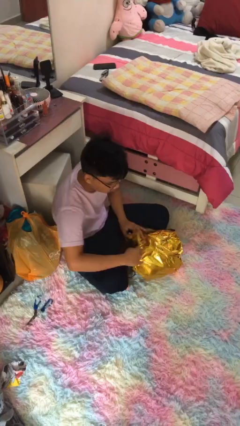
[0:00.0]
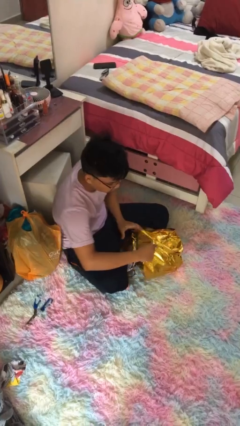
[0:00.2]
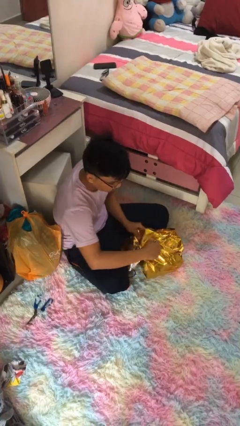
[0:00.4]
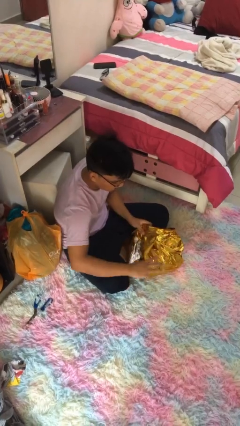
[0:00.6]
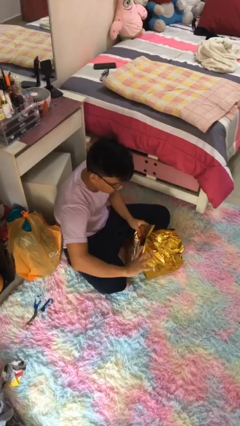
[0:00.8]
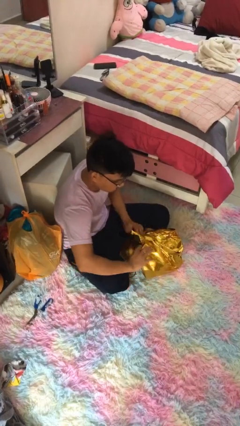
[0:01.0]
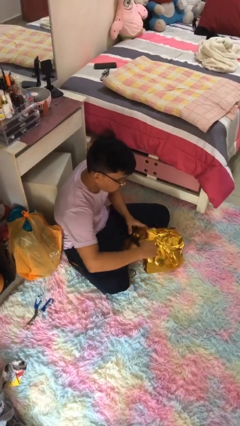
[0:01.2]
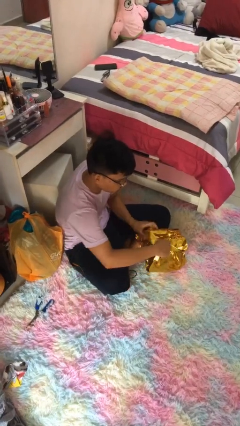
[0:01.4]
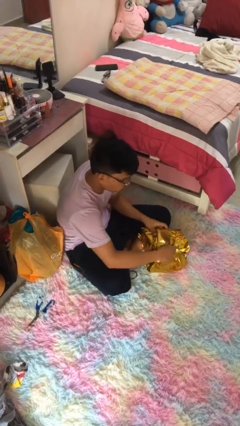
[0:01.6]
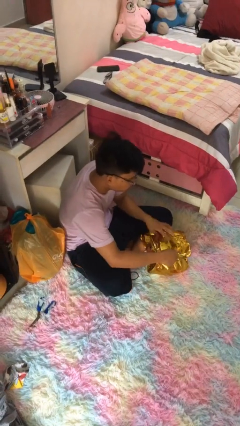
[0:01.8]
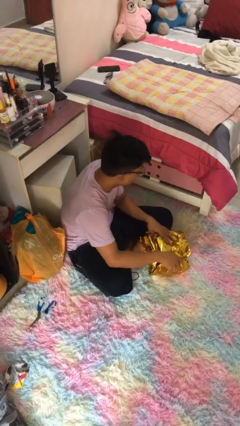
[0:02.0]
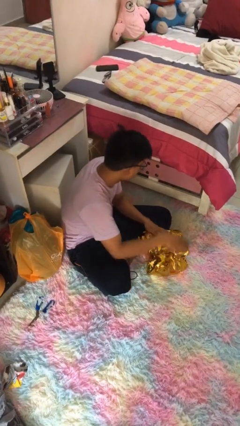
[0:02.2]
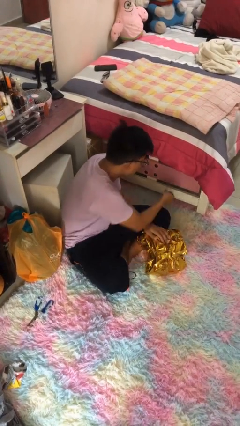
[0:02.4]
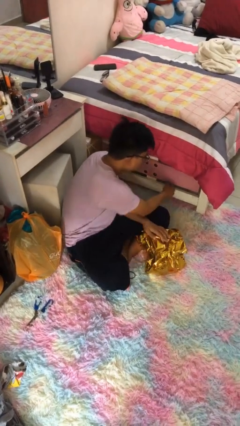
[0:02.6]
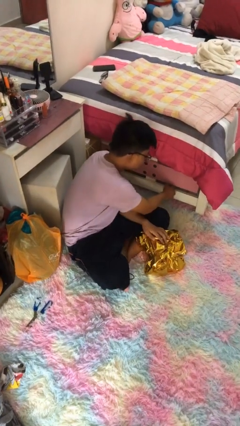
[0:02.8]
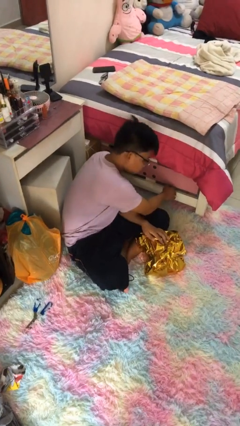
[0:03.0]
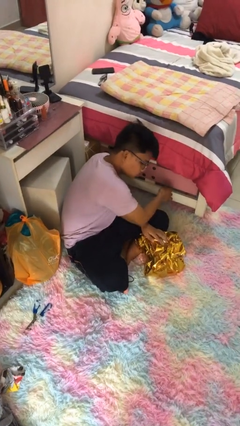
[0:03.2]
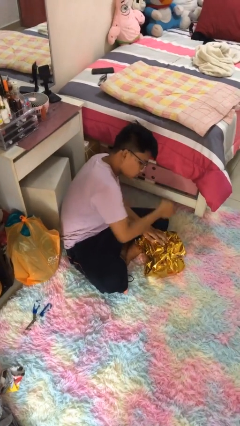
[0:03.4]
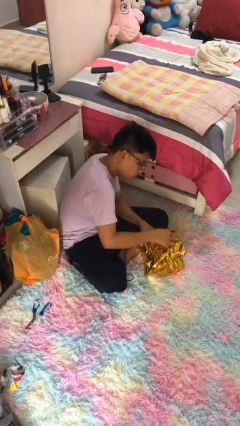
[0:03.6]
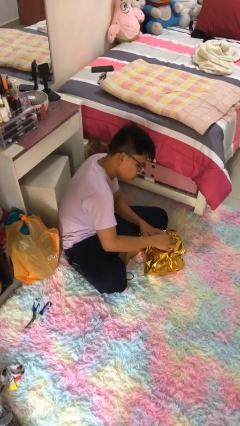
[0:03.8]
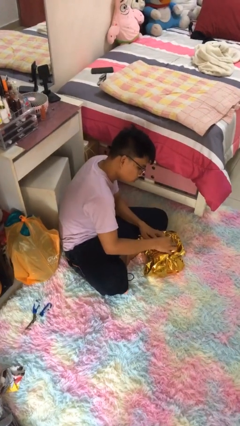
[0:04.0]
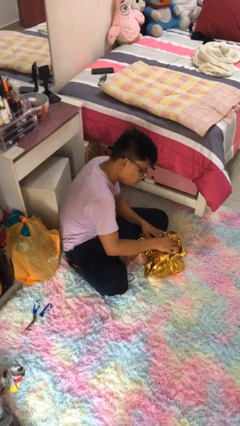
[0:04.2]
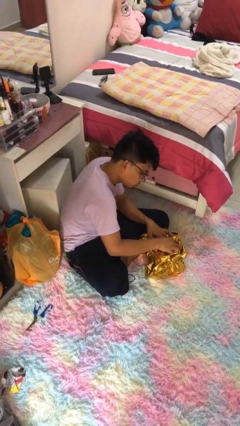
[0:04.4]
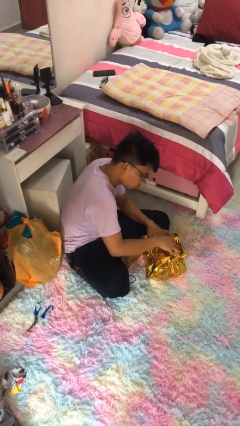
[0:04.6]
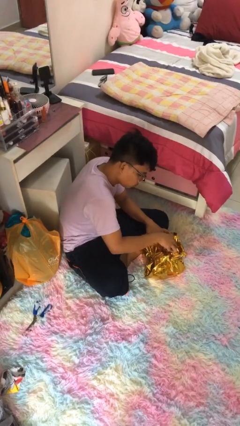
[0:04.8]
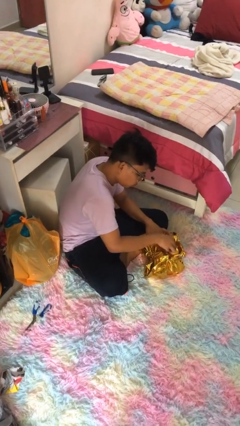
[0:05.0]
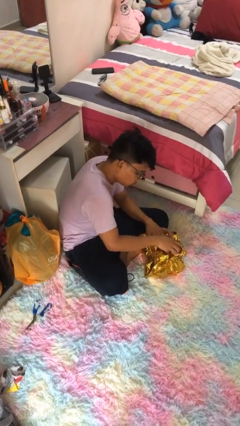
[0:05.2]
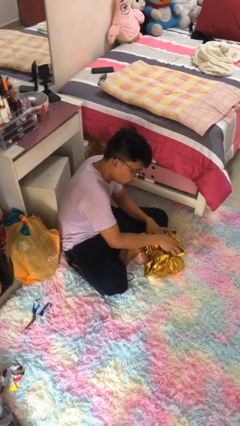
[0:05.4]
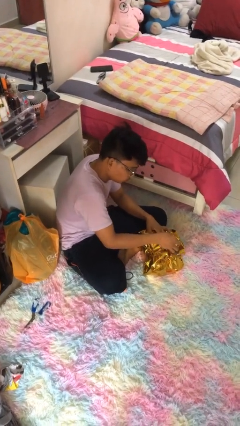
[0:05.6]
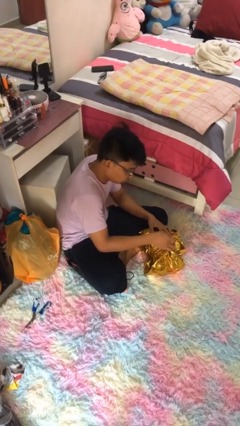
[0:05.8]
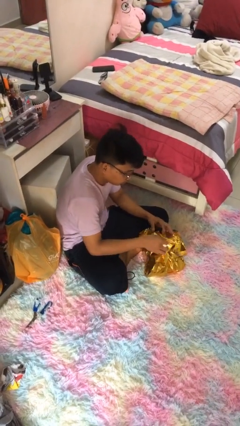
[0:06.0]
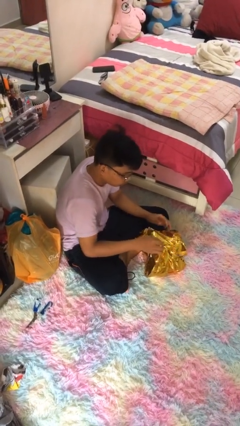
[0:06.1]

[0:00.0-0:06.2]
person wraps box

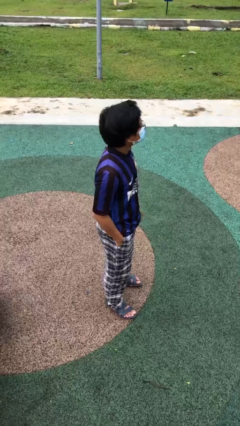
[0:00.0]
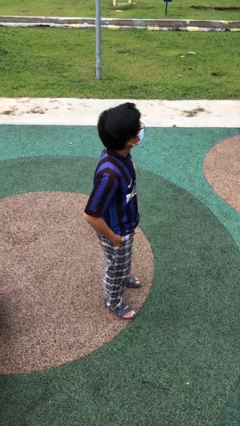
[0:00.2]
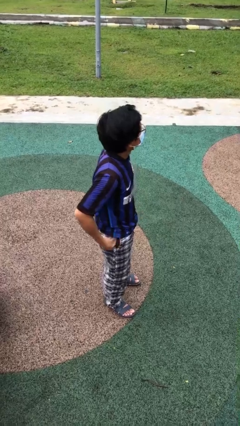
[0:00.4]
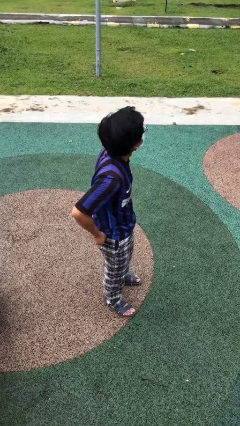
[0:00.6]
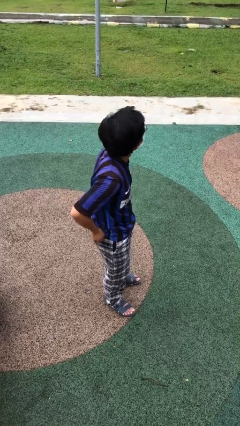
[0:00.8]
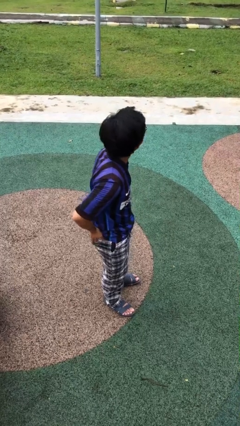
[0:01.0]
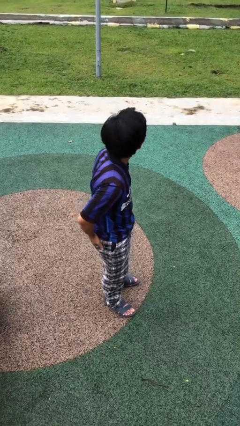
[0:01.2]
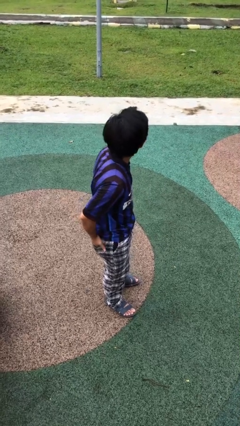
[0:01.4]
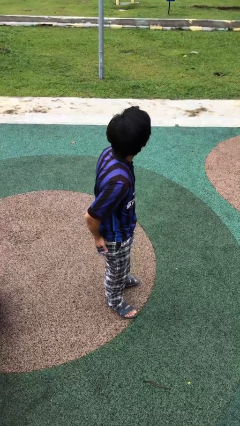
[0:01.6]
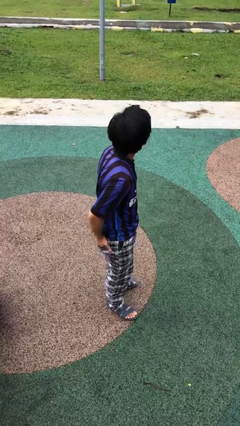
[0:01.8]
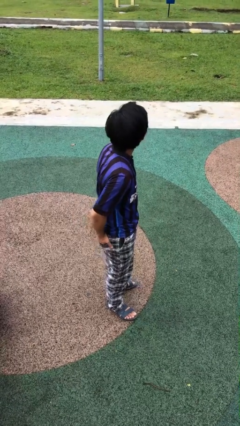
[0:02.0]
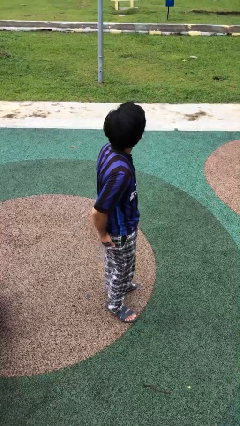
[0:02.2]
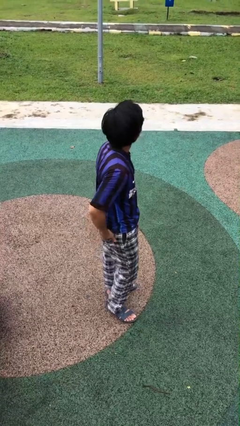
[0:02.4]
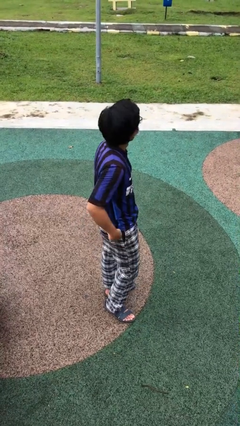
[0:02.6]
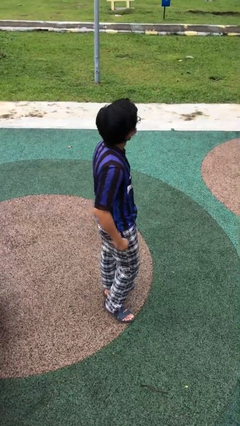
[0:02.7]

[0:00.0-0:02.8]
person puts hands in back pockets

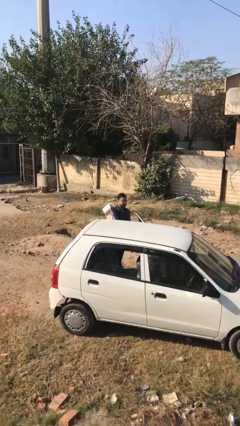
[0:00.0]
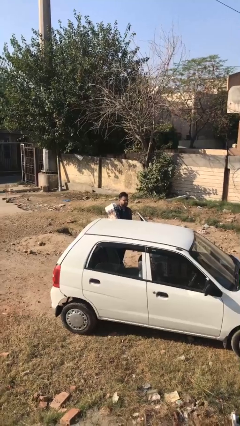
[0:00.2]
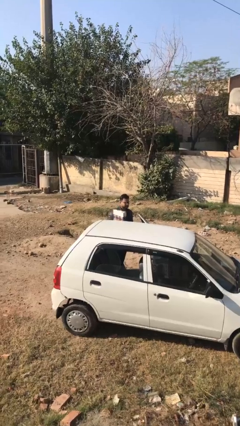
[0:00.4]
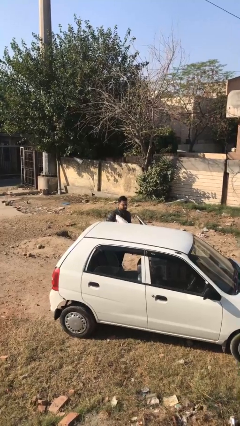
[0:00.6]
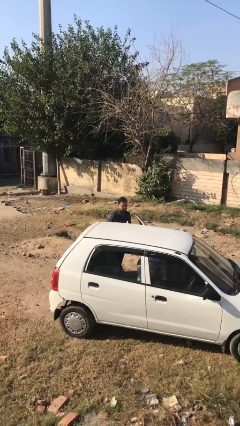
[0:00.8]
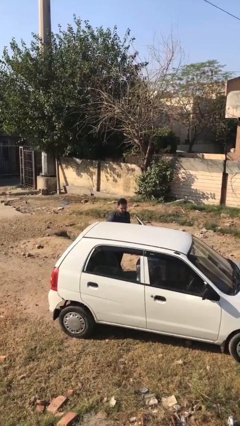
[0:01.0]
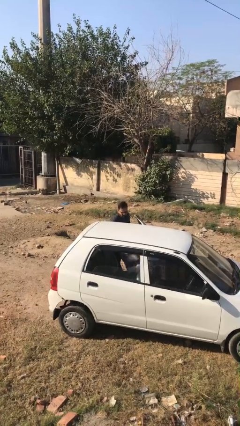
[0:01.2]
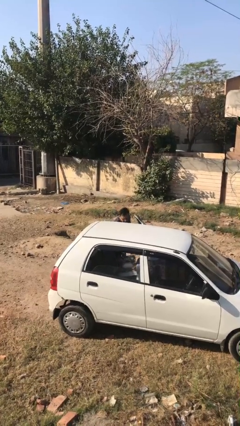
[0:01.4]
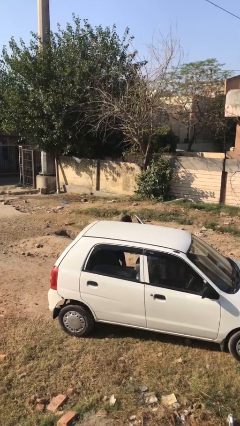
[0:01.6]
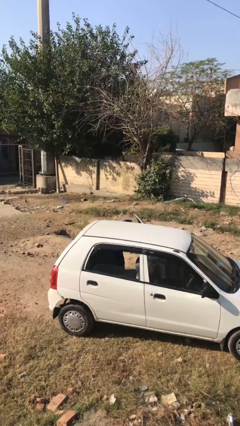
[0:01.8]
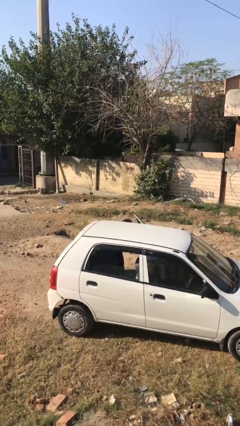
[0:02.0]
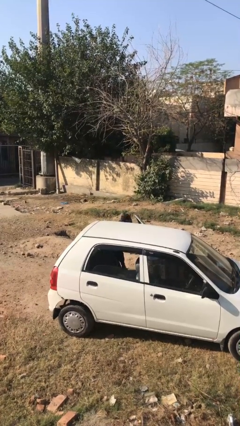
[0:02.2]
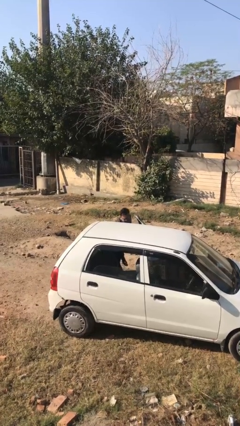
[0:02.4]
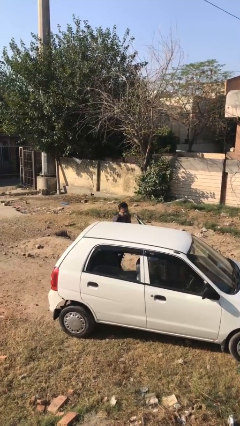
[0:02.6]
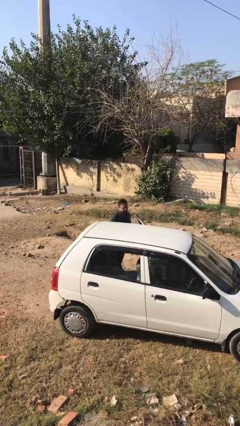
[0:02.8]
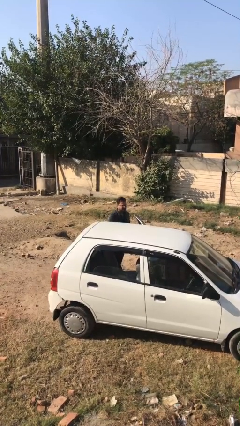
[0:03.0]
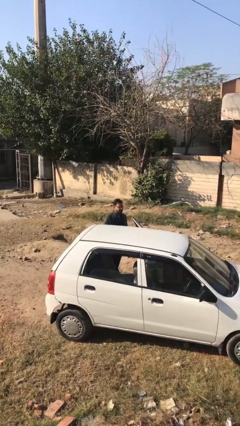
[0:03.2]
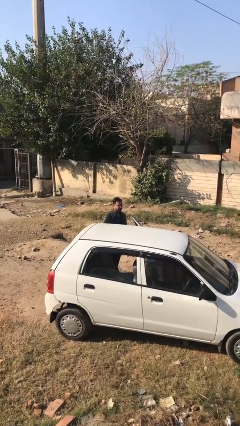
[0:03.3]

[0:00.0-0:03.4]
person loads car

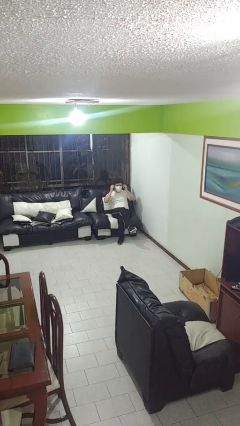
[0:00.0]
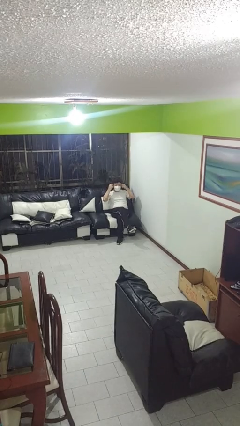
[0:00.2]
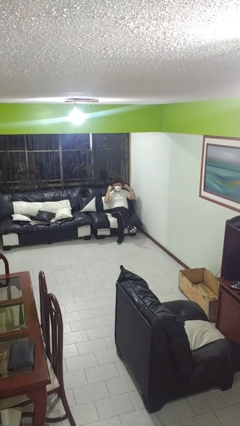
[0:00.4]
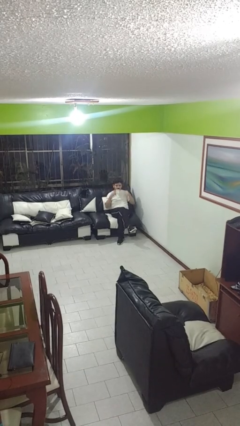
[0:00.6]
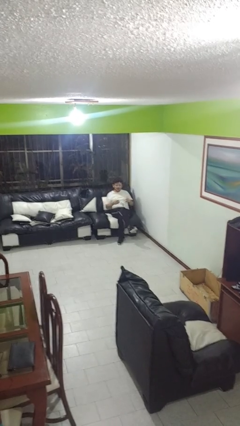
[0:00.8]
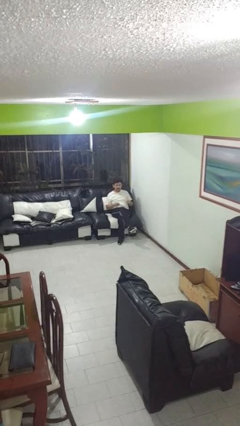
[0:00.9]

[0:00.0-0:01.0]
person takes off facemask

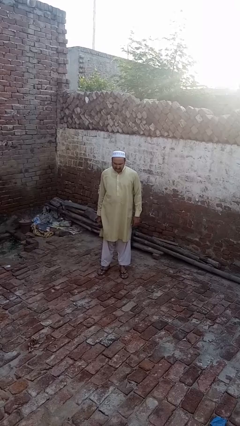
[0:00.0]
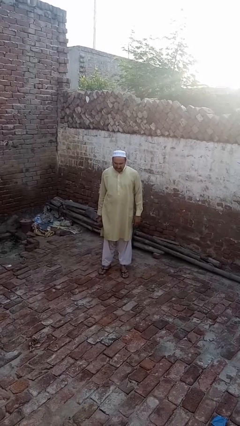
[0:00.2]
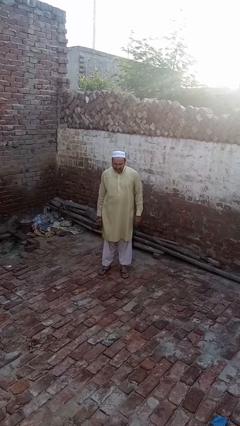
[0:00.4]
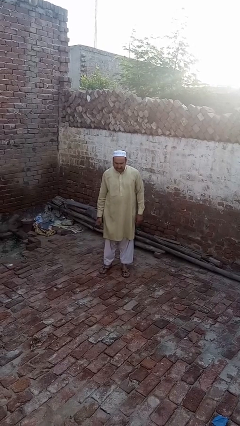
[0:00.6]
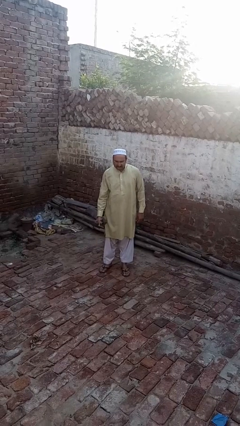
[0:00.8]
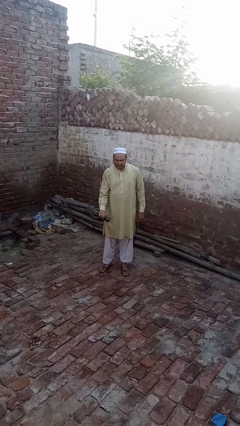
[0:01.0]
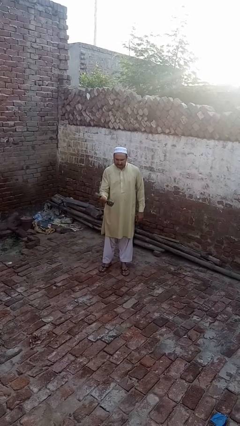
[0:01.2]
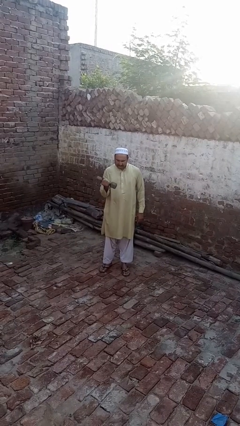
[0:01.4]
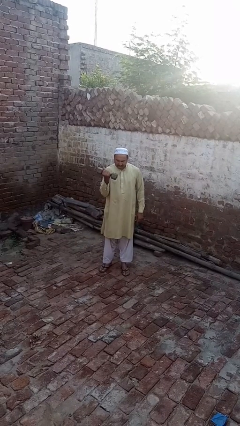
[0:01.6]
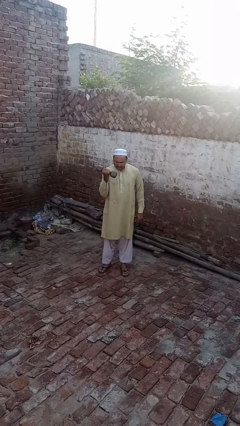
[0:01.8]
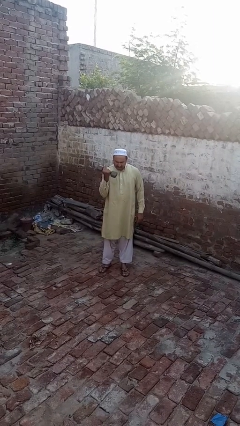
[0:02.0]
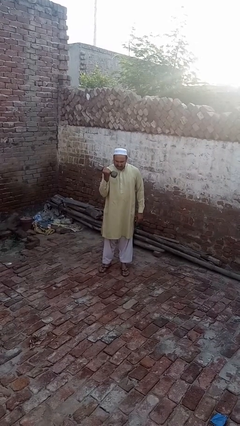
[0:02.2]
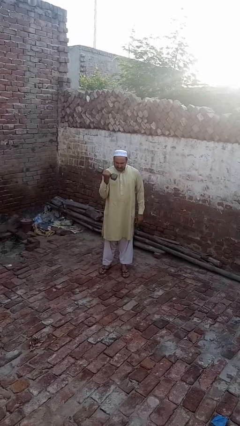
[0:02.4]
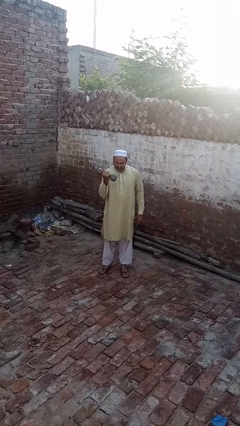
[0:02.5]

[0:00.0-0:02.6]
person lifts dumbbells

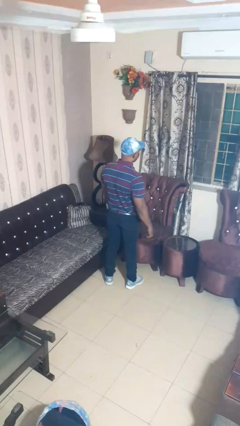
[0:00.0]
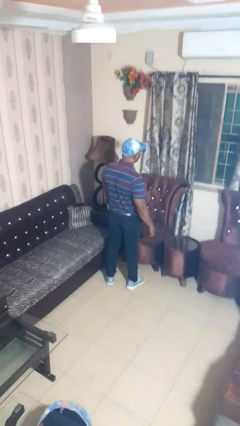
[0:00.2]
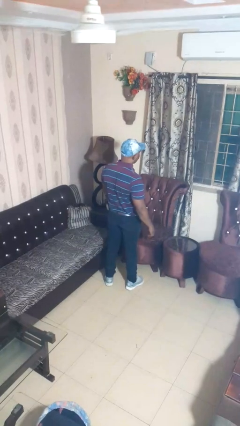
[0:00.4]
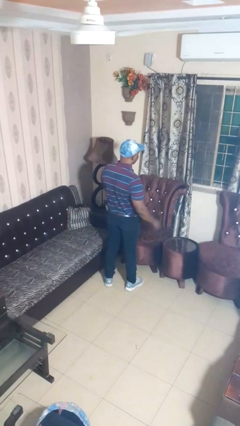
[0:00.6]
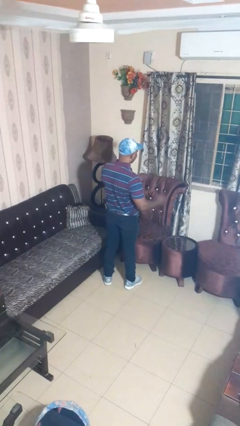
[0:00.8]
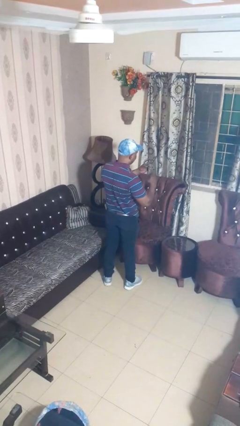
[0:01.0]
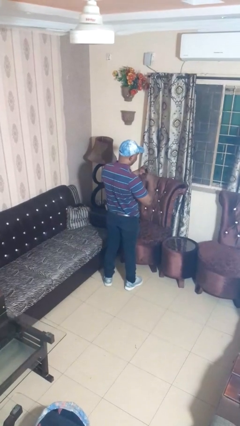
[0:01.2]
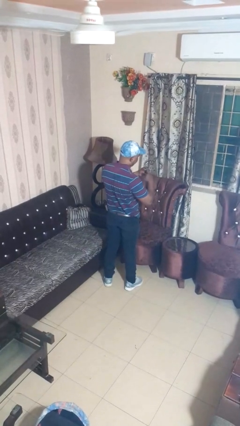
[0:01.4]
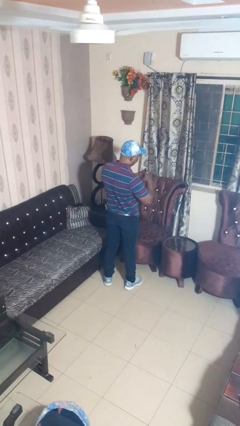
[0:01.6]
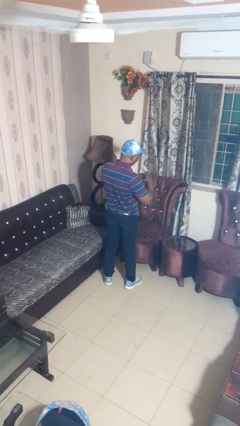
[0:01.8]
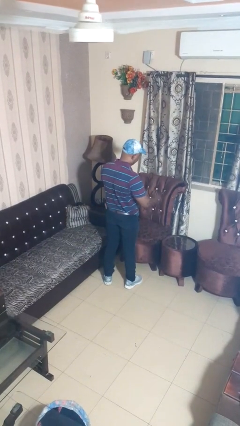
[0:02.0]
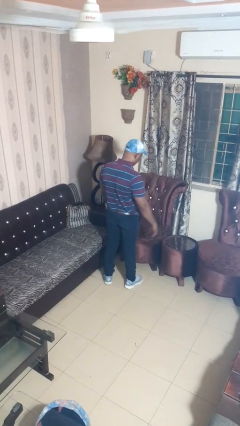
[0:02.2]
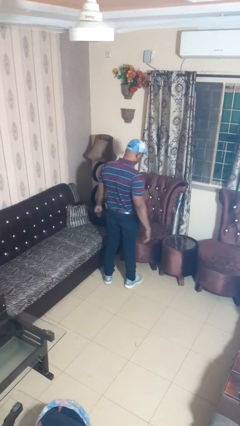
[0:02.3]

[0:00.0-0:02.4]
person puts on ring
